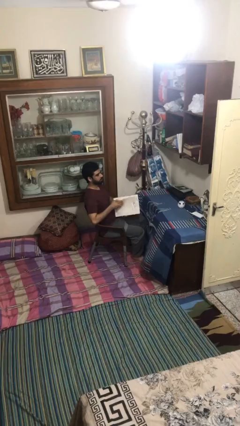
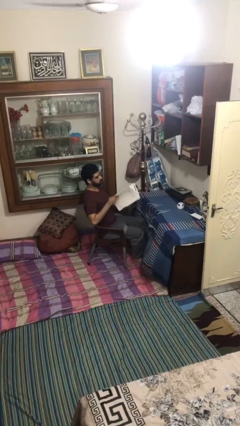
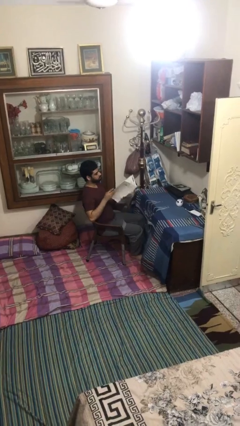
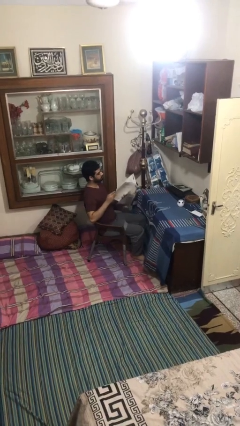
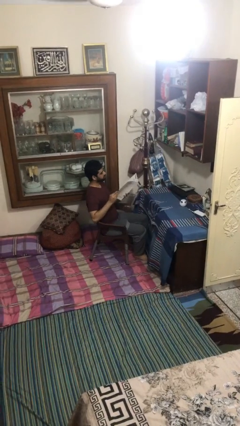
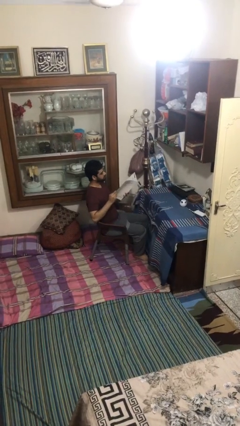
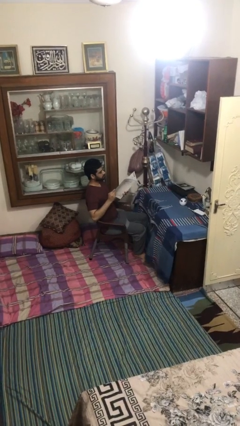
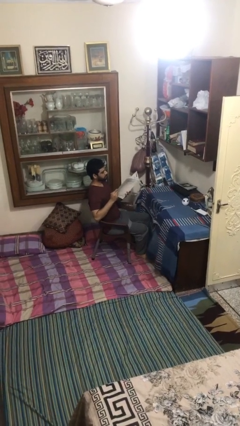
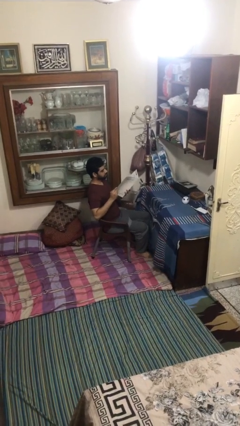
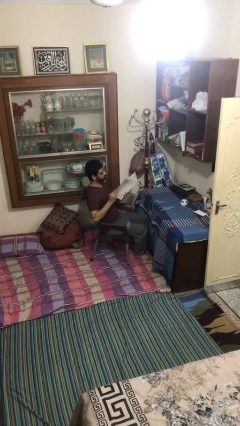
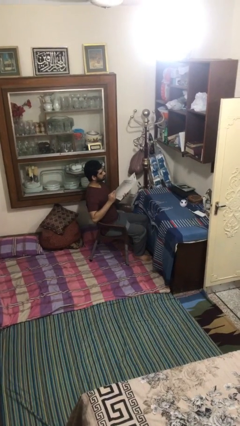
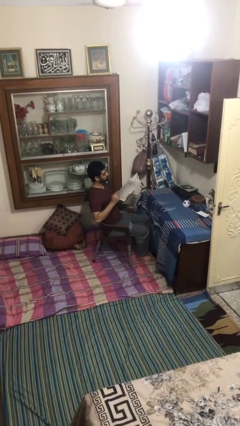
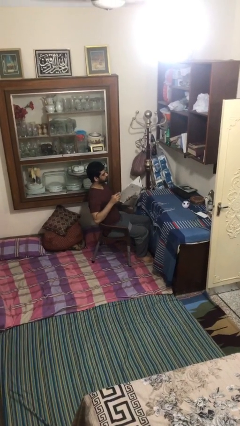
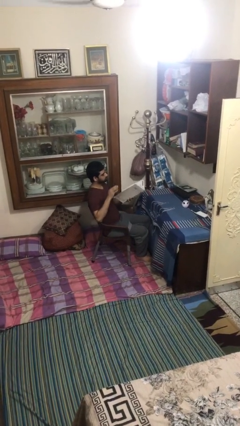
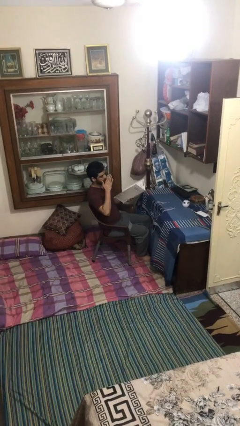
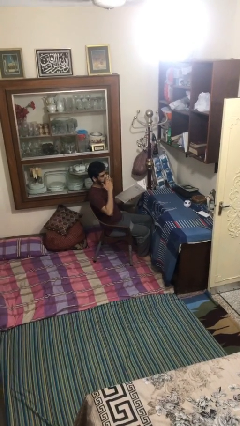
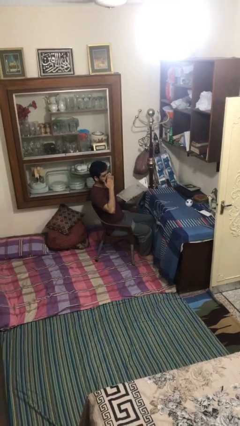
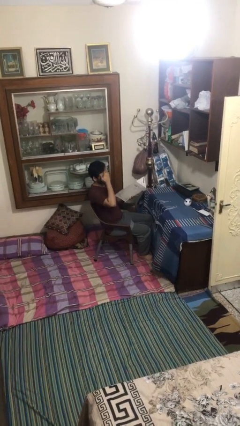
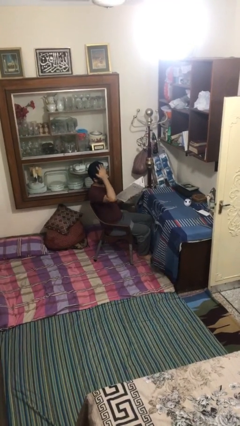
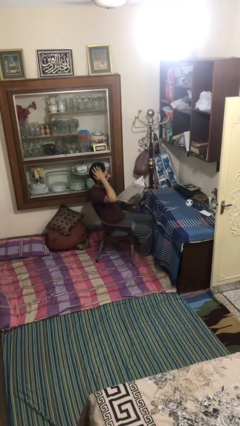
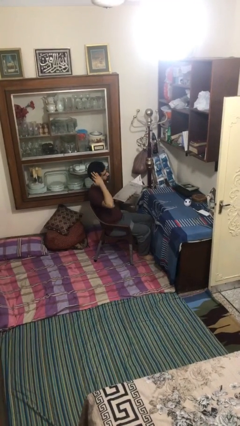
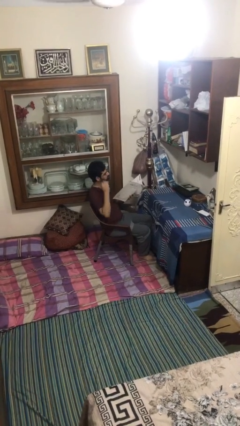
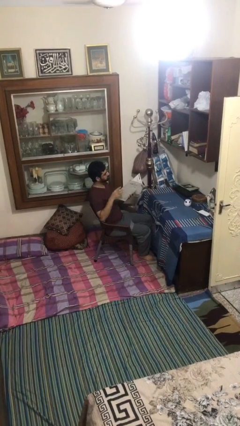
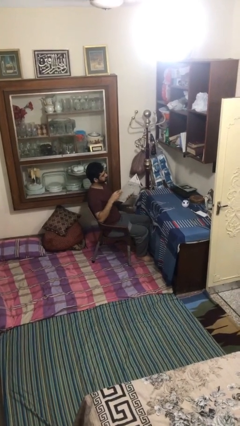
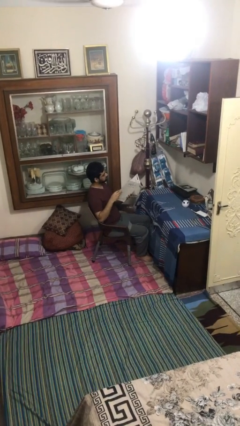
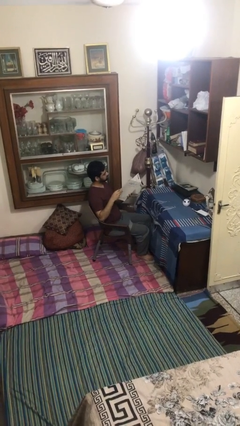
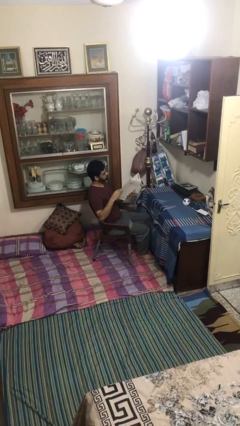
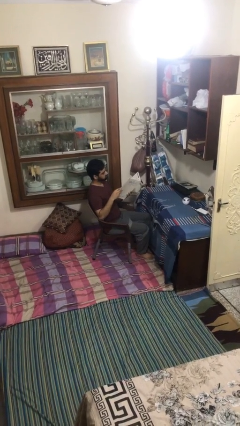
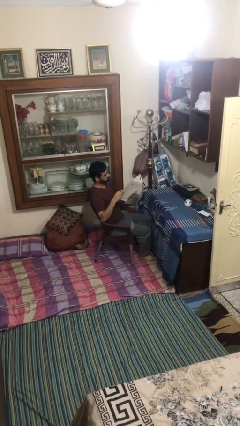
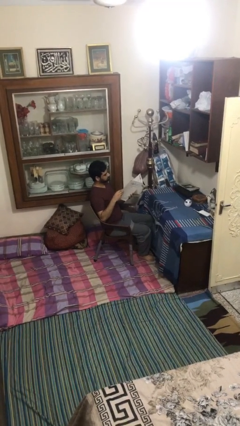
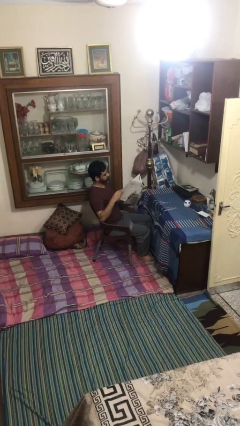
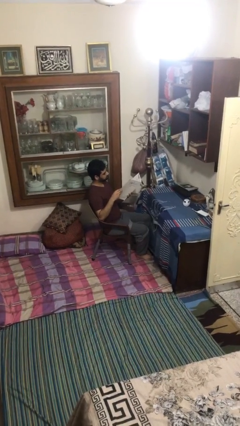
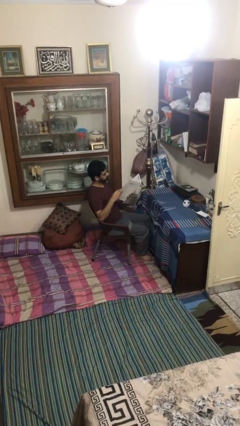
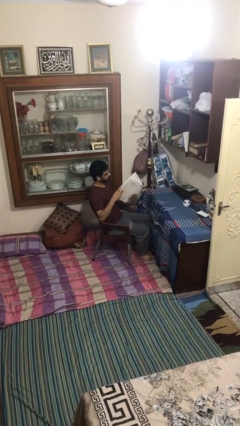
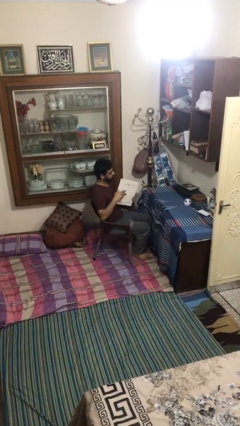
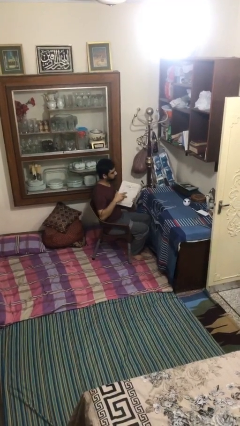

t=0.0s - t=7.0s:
person reads document

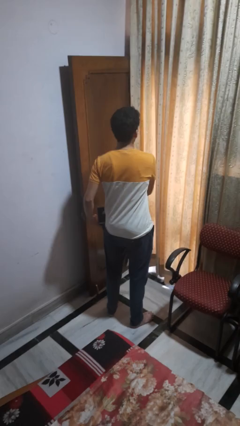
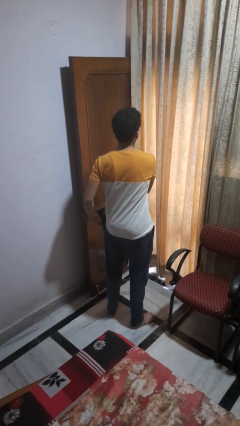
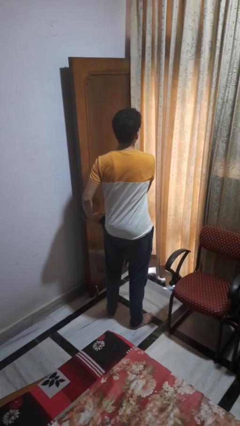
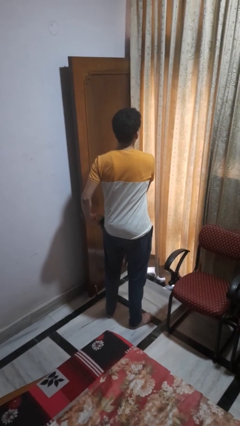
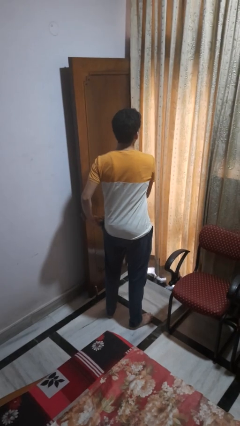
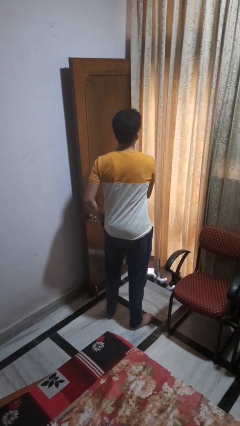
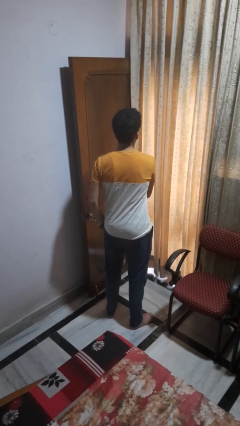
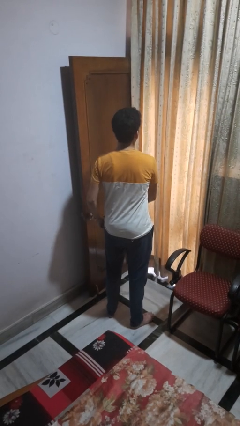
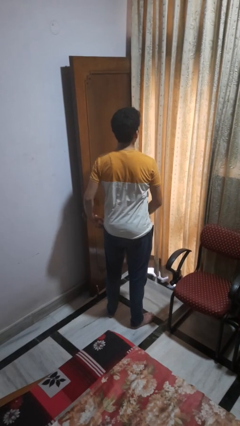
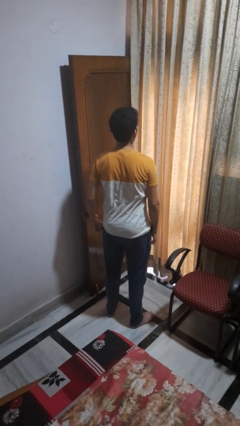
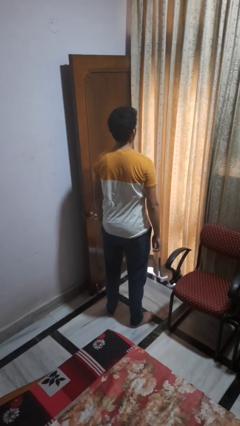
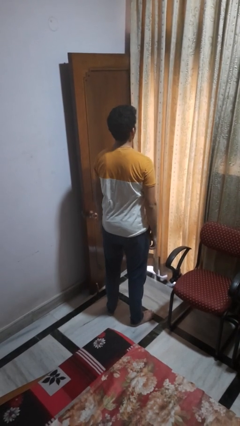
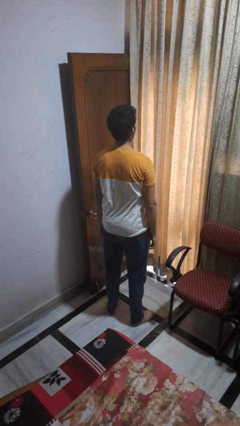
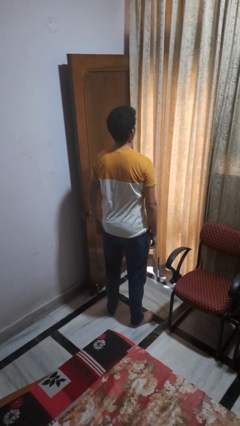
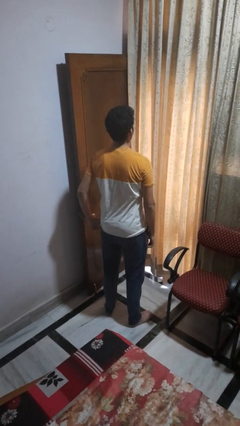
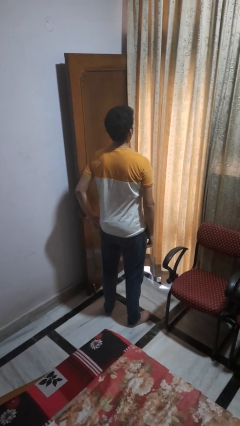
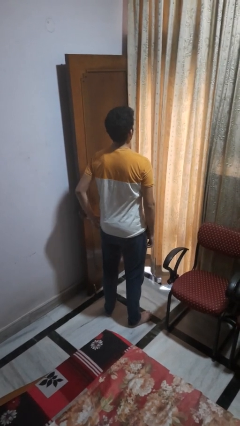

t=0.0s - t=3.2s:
person puts phone into pocket

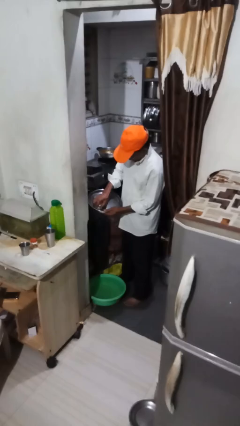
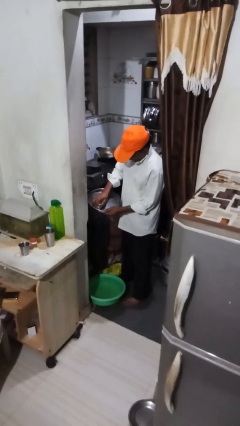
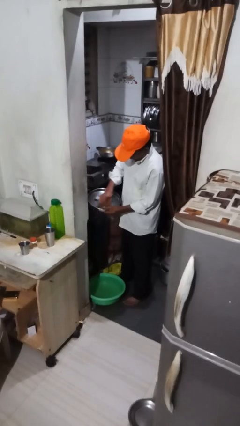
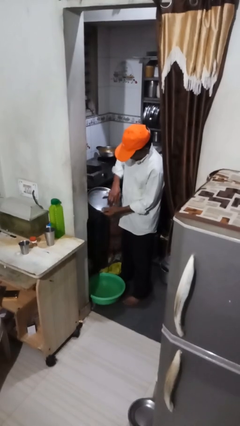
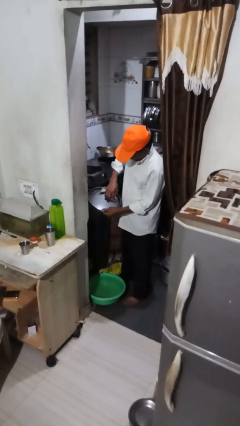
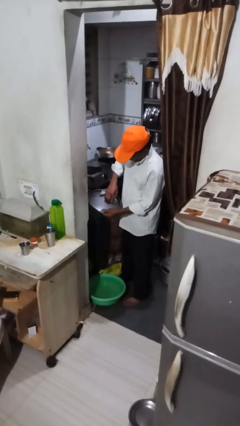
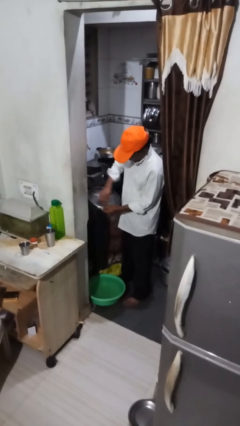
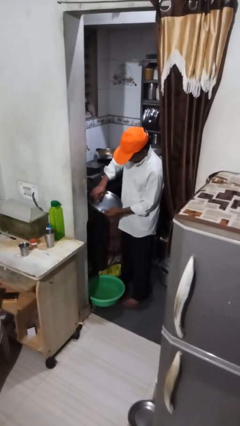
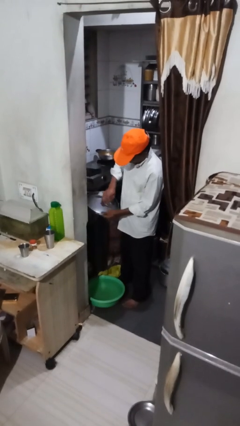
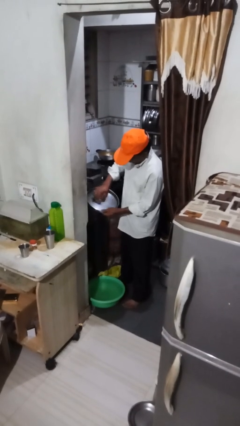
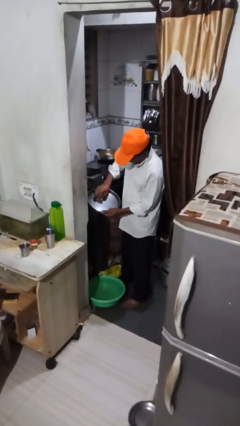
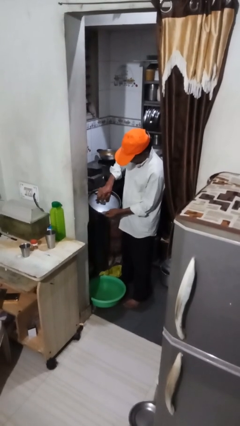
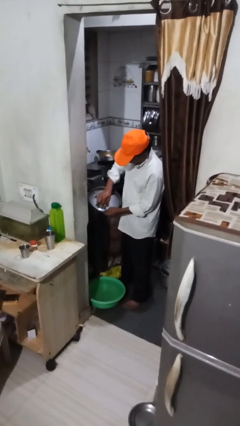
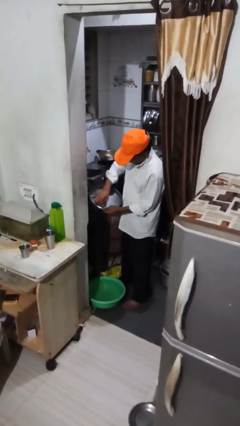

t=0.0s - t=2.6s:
person dries dish

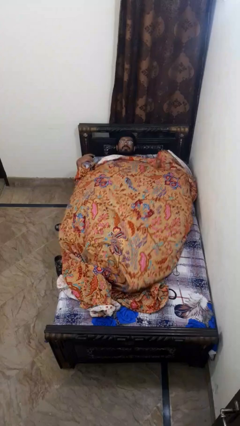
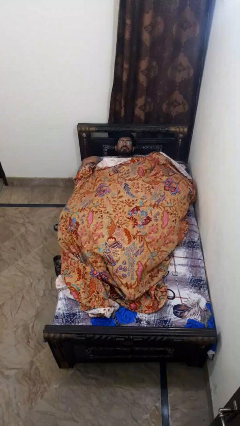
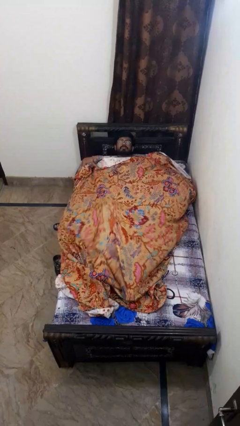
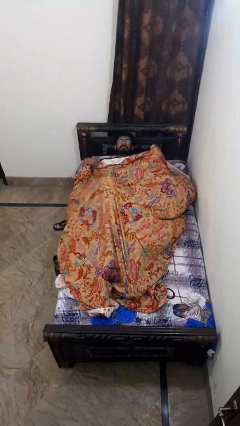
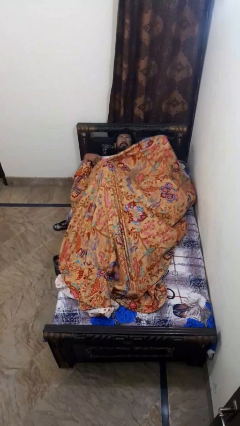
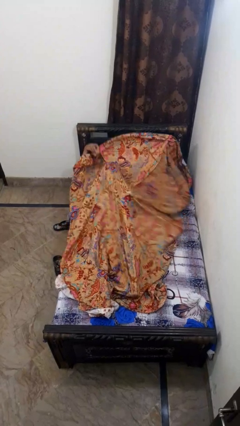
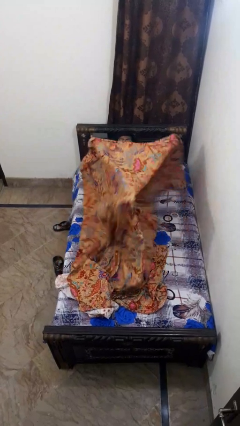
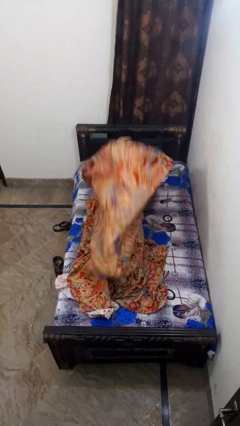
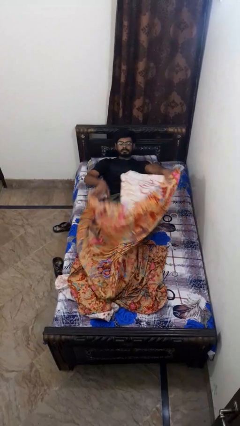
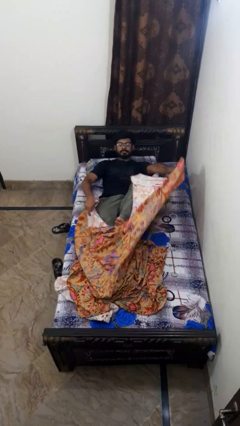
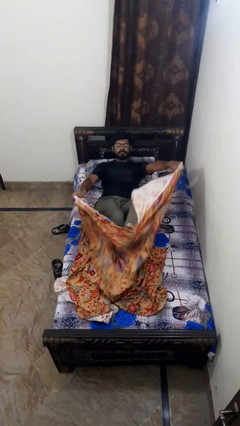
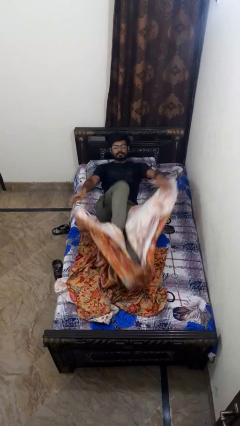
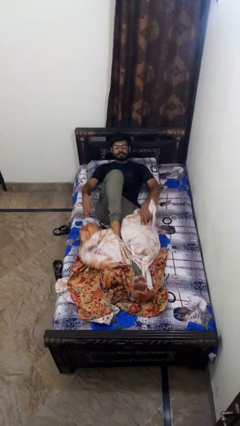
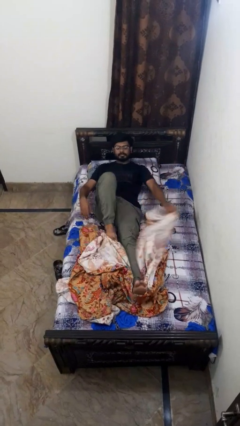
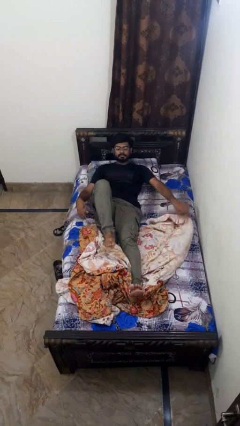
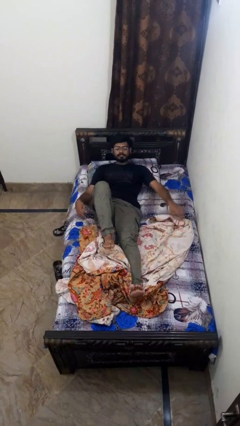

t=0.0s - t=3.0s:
person uncovers with bedsheets

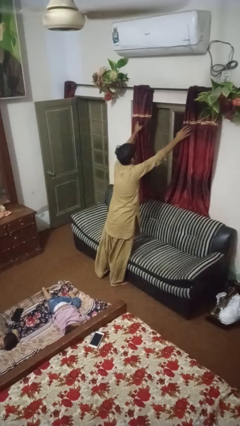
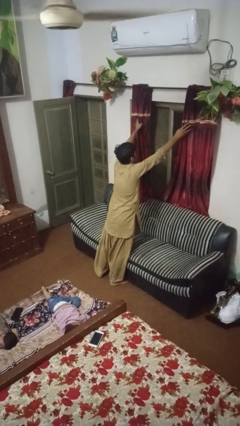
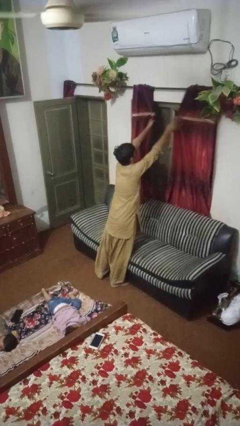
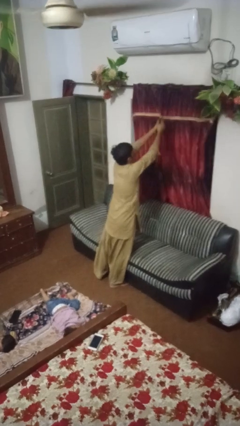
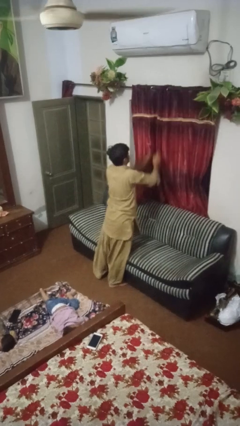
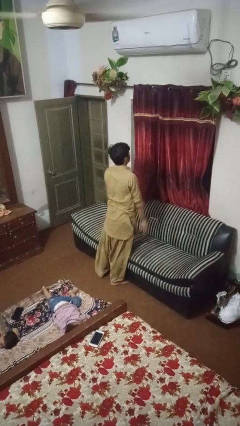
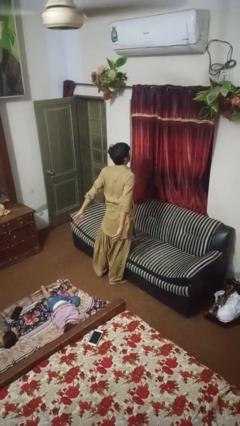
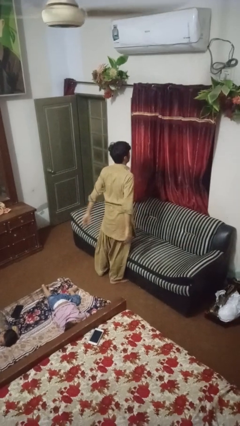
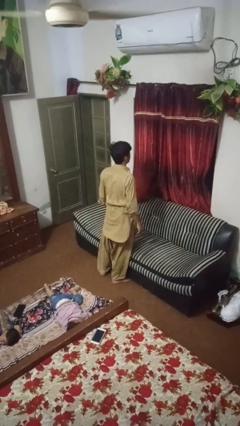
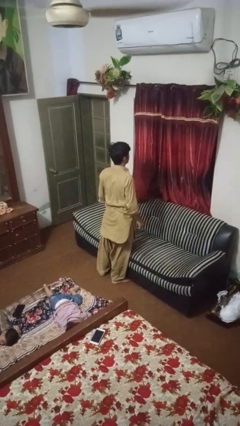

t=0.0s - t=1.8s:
person closes curtains
